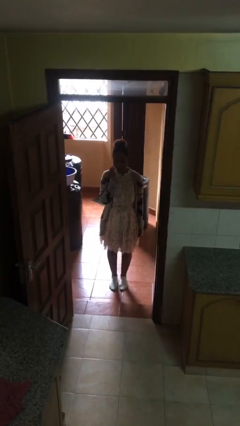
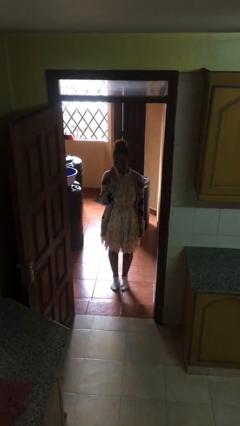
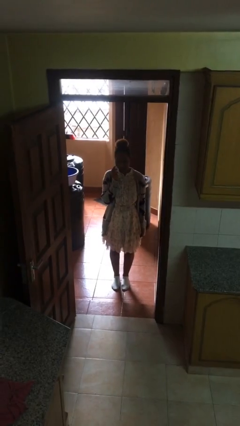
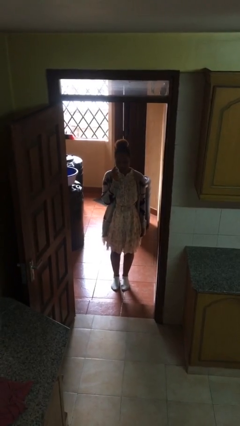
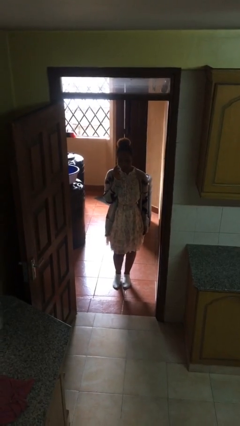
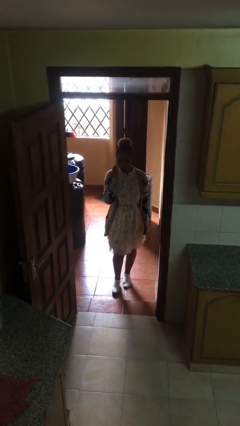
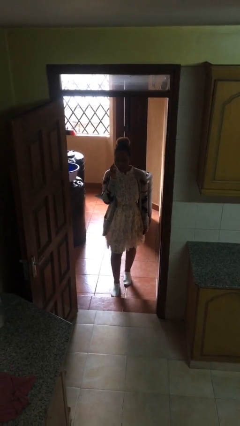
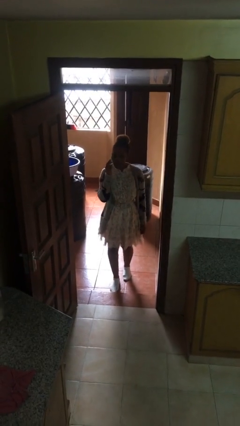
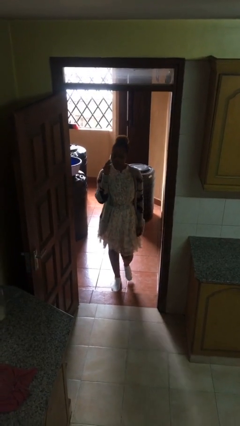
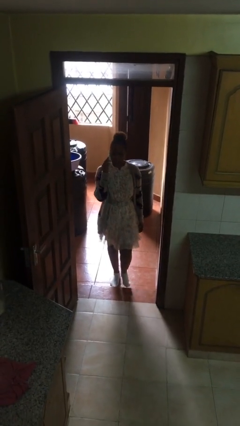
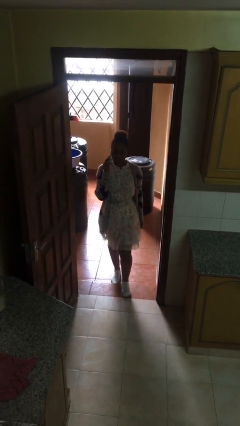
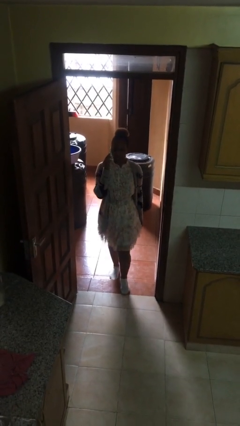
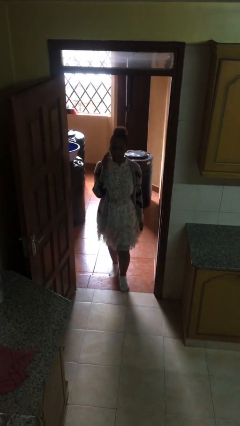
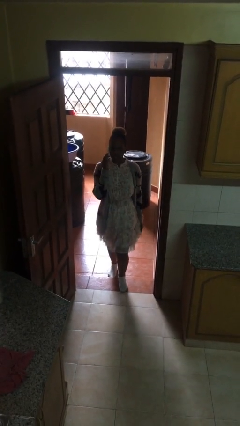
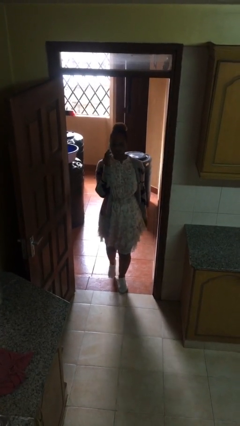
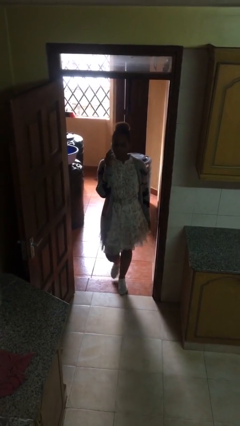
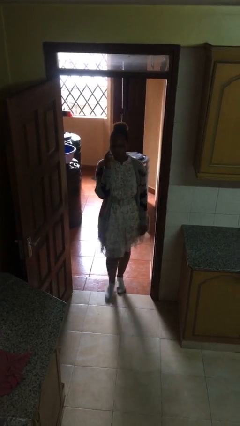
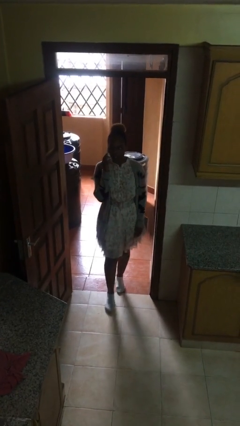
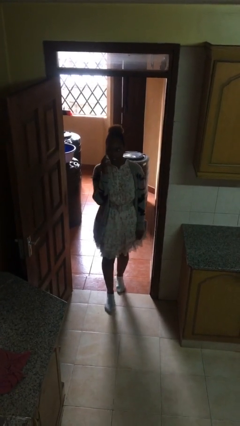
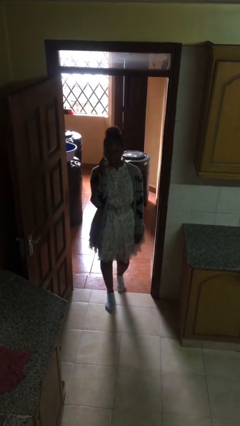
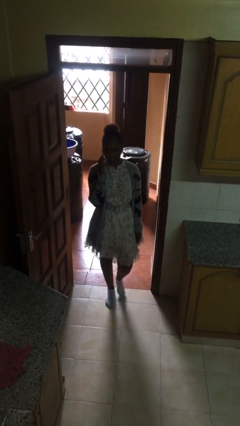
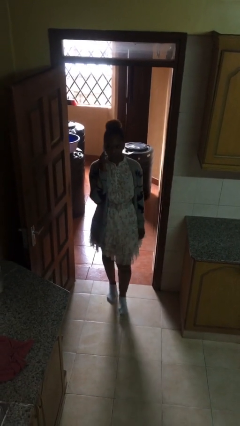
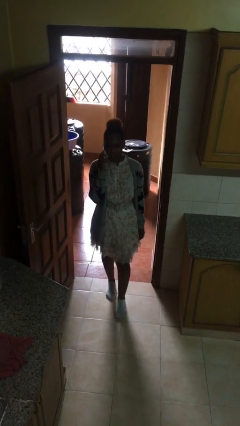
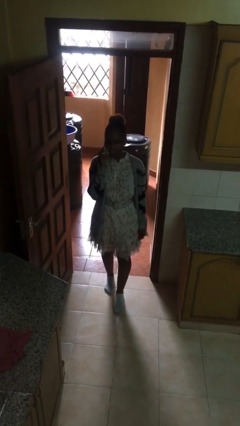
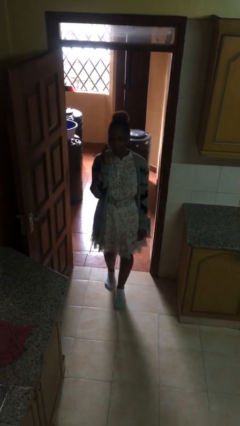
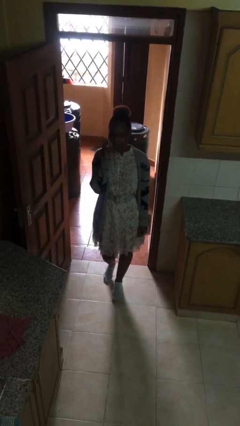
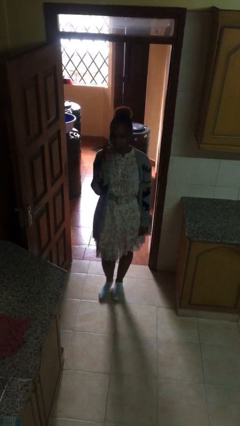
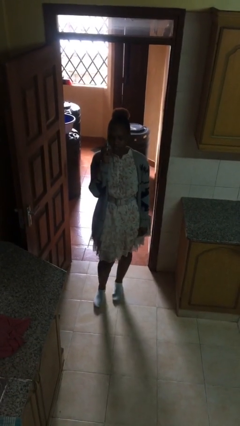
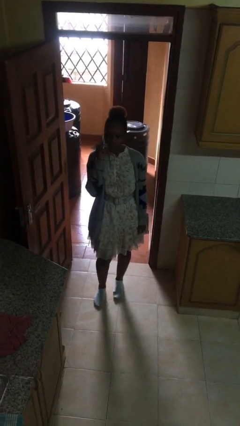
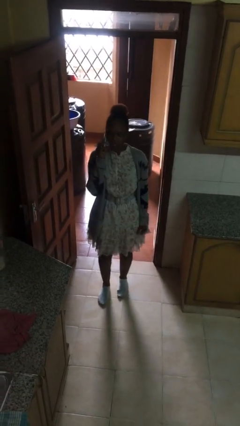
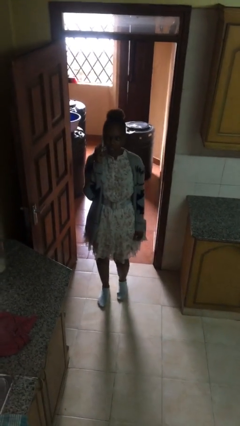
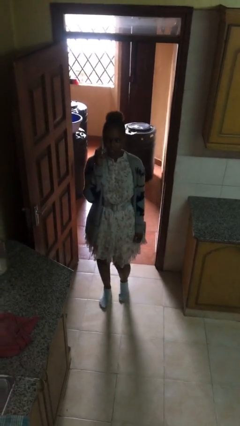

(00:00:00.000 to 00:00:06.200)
person enters scene through structure

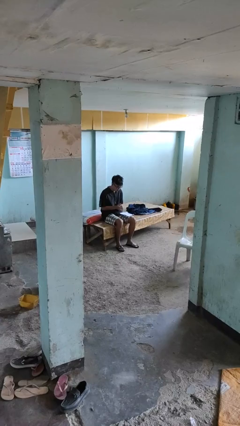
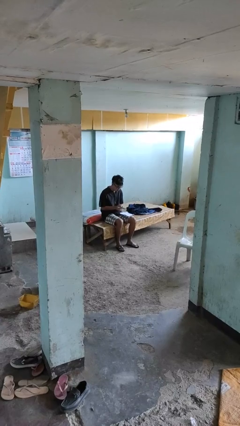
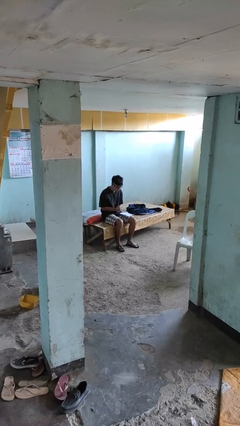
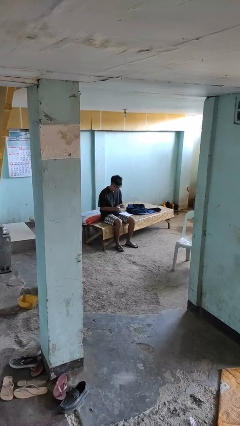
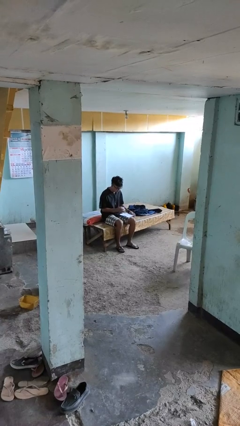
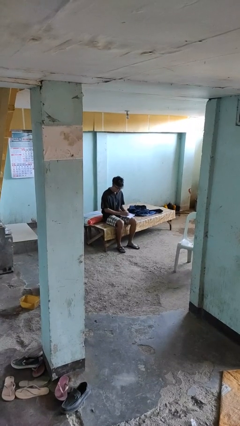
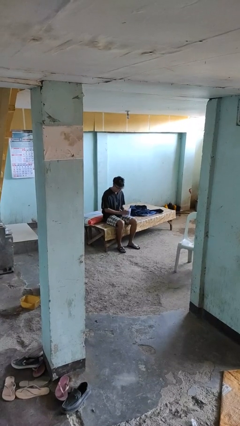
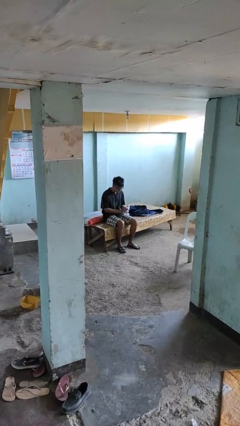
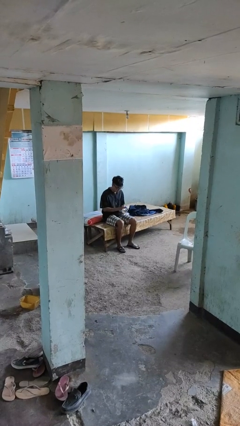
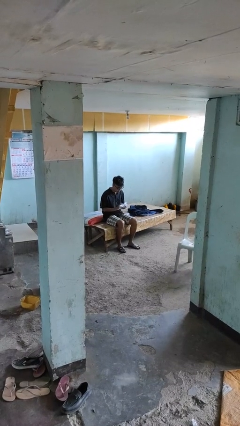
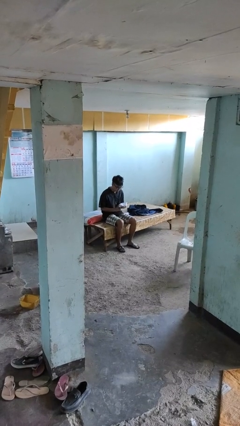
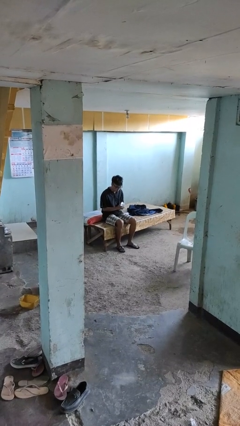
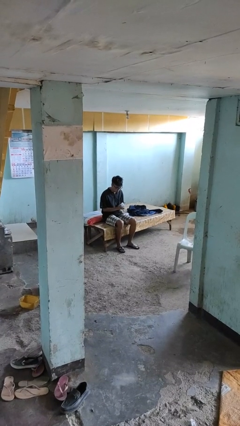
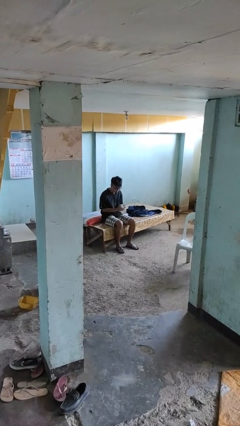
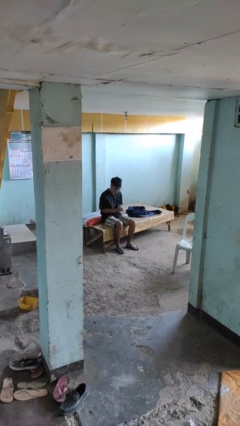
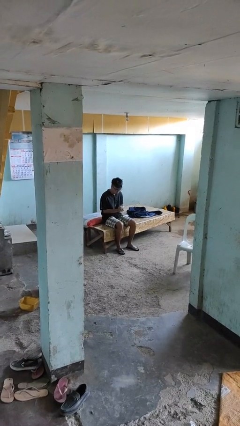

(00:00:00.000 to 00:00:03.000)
person crumples paper

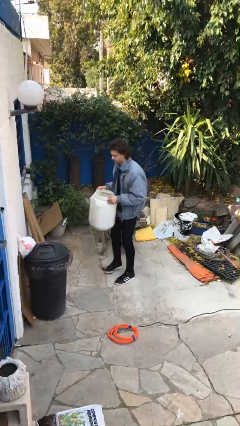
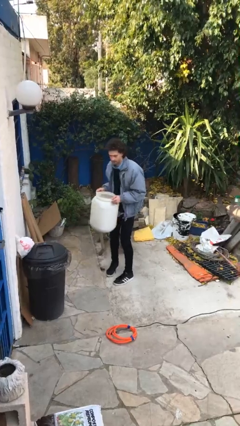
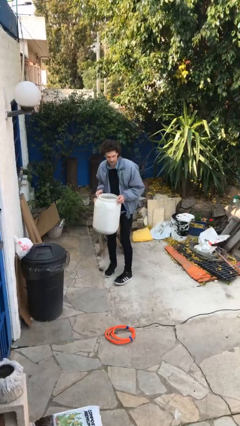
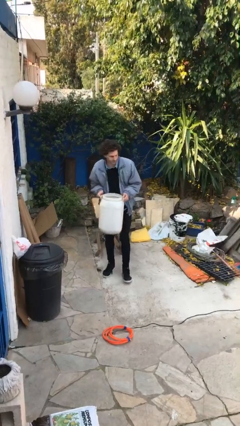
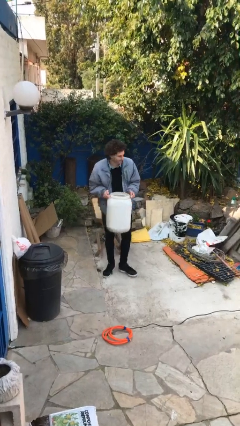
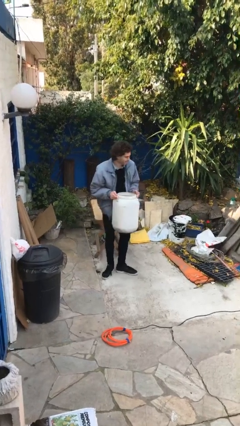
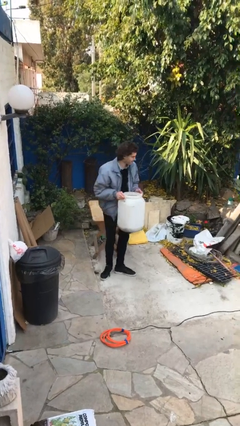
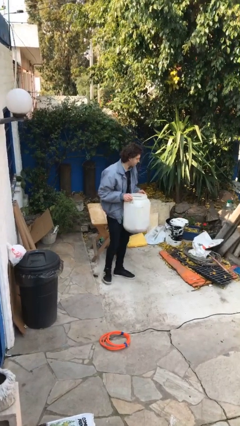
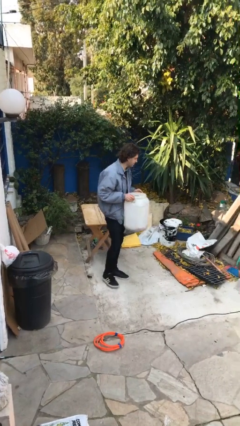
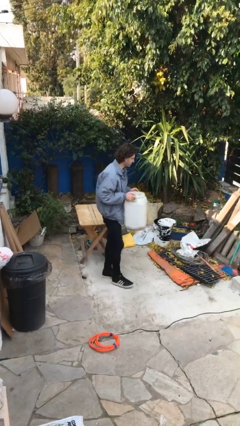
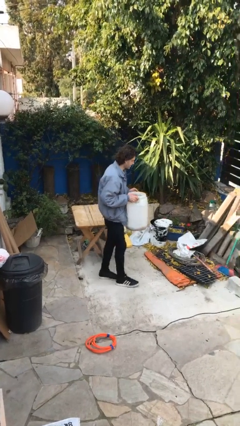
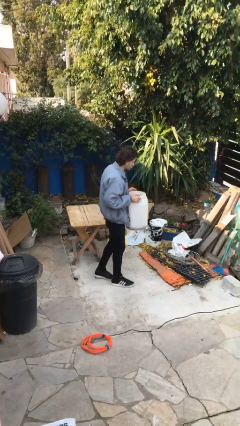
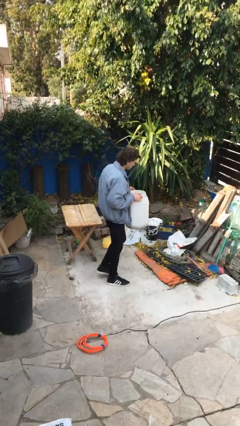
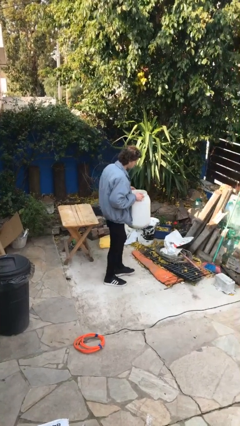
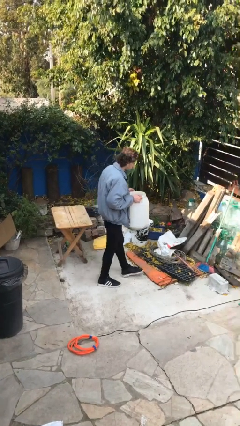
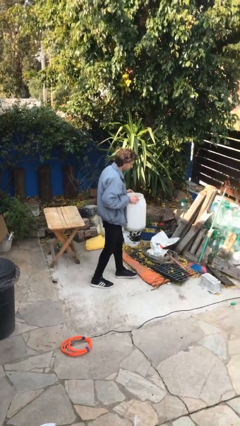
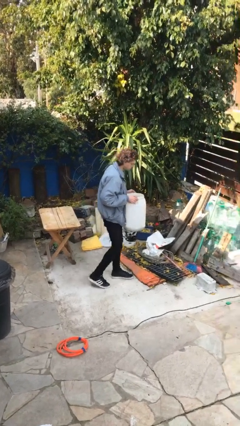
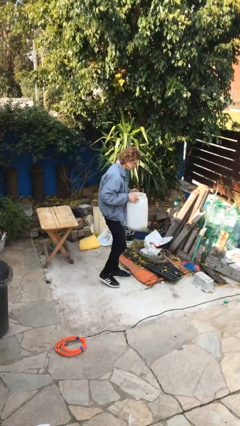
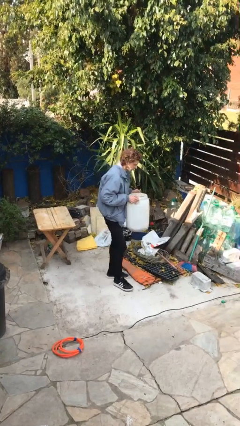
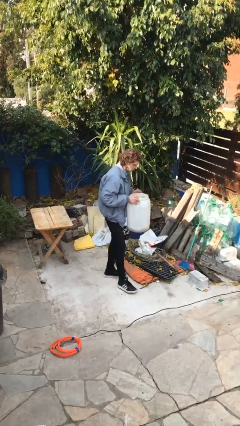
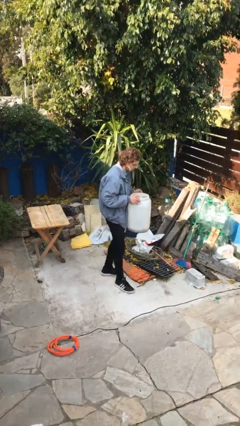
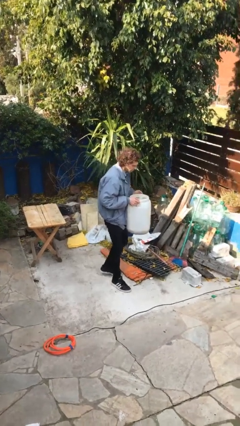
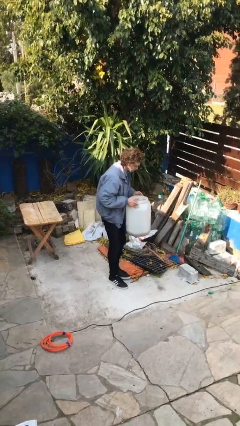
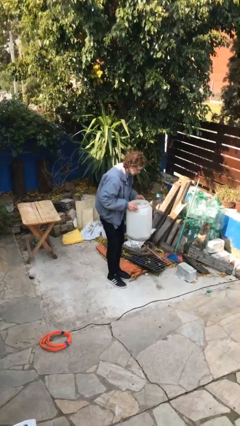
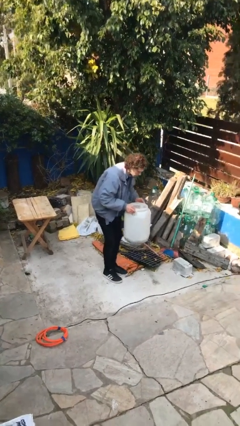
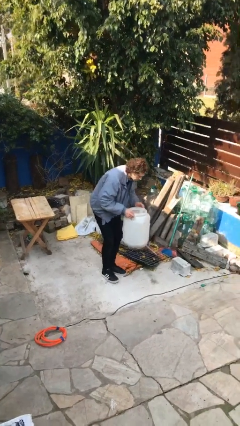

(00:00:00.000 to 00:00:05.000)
person carries heavy object

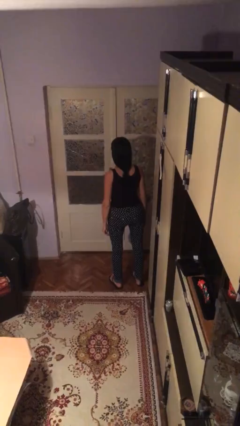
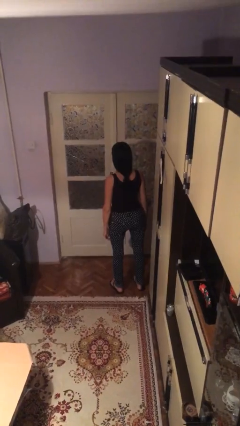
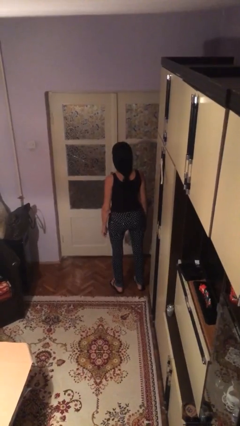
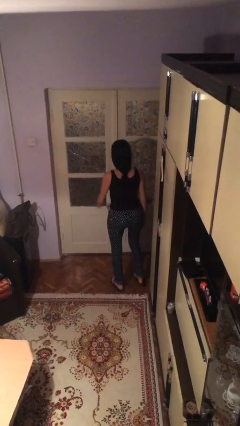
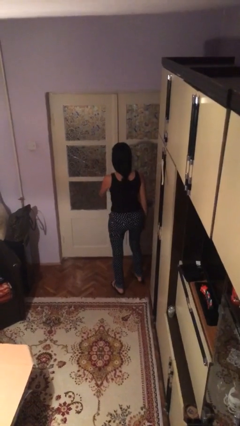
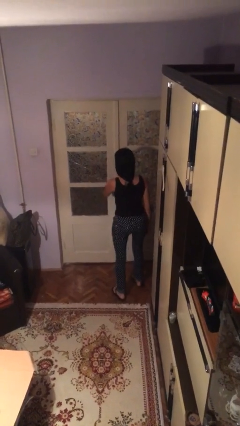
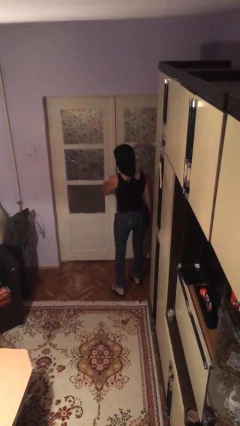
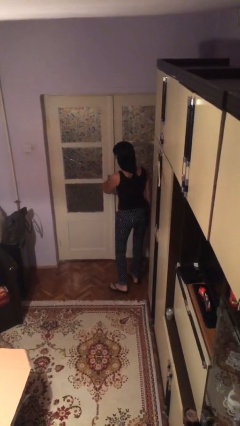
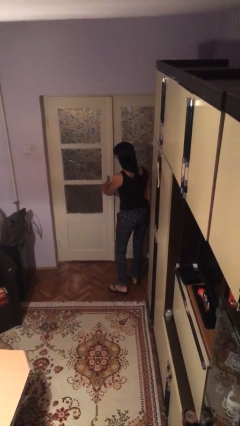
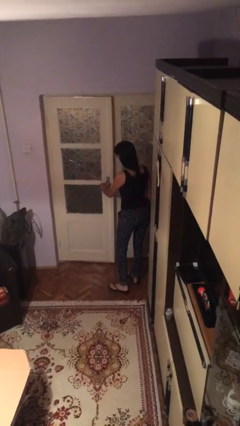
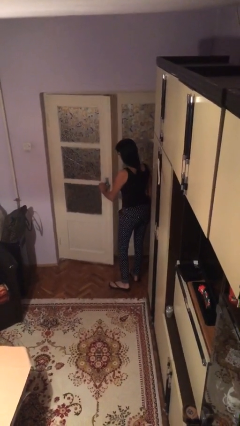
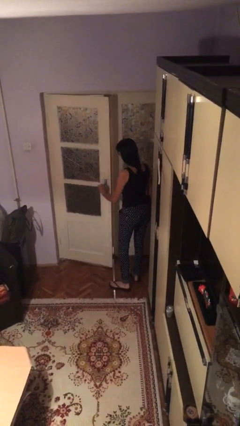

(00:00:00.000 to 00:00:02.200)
person opens facility door

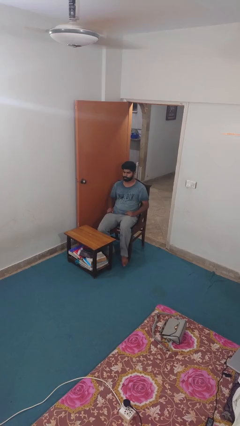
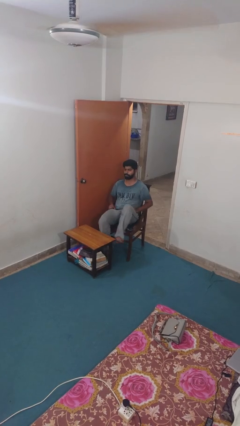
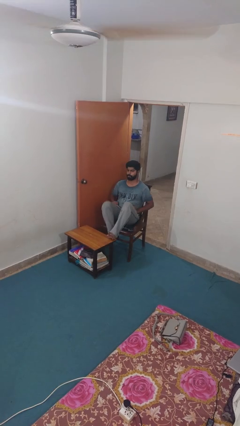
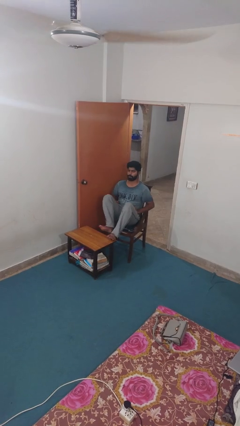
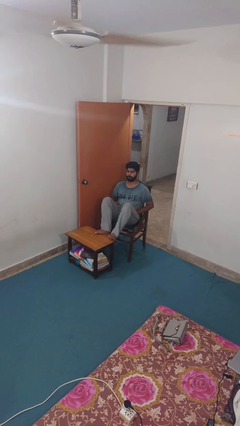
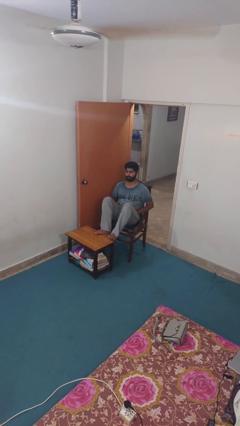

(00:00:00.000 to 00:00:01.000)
person puts feet up

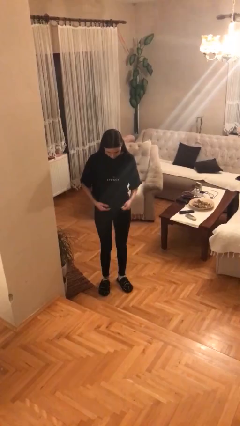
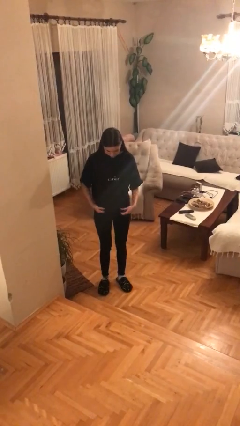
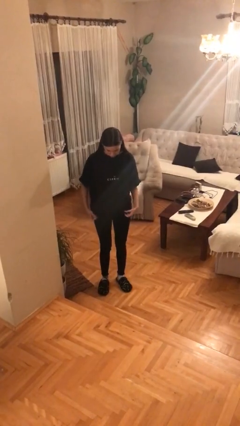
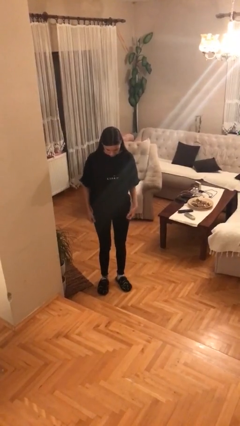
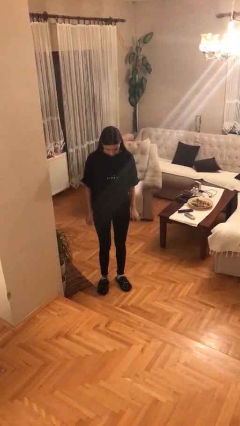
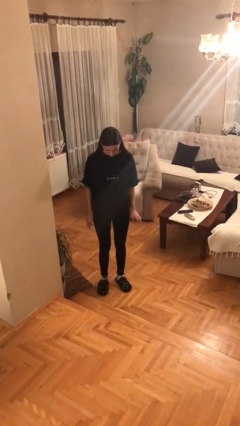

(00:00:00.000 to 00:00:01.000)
person untucks shirt
